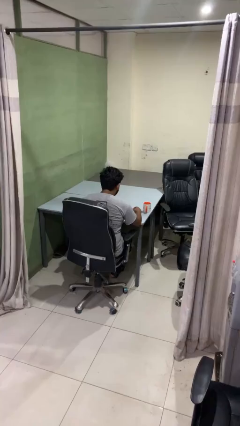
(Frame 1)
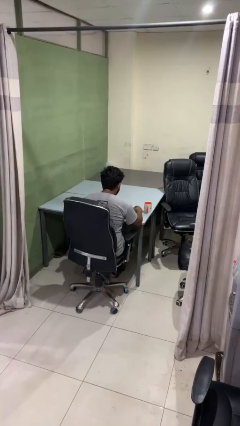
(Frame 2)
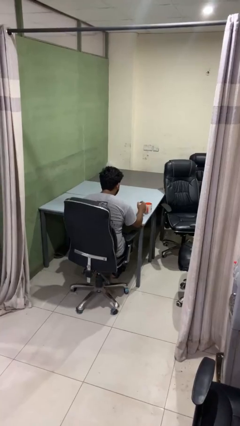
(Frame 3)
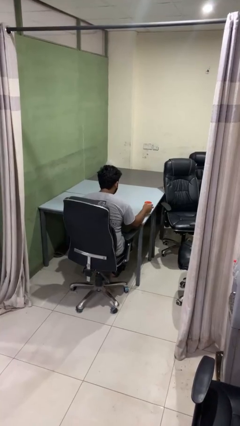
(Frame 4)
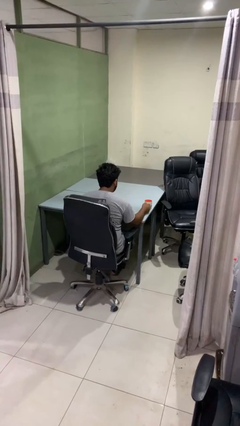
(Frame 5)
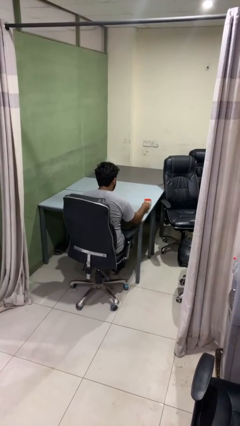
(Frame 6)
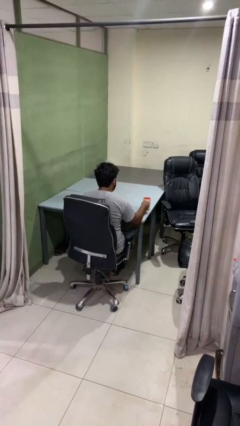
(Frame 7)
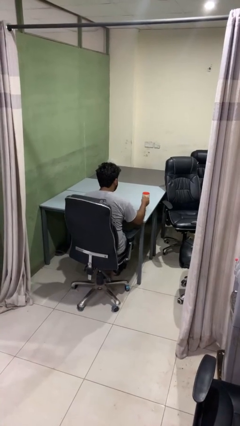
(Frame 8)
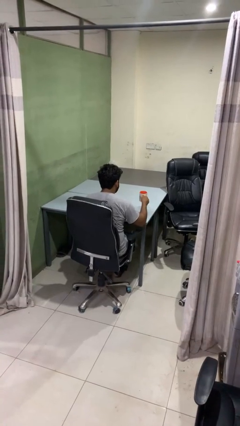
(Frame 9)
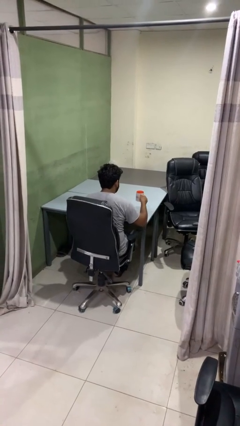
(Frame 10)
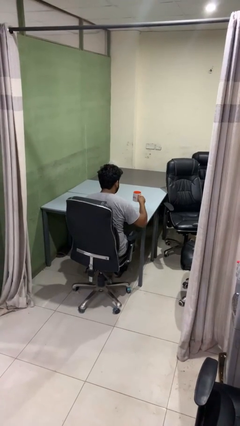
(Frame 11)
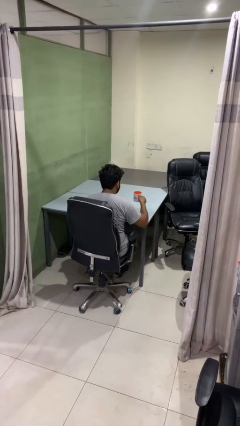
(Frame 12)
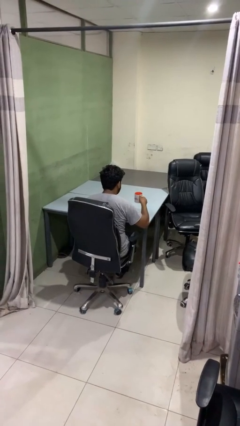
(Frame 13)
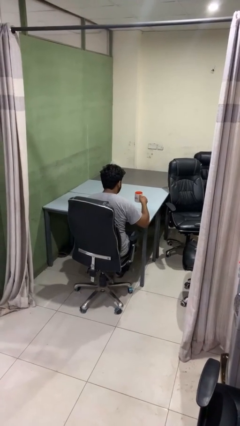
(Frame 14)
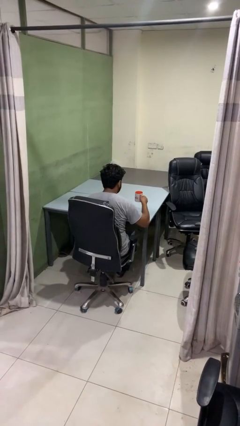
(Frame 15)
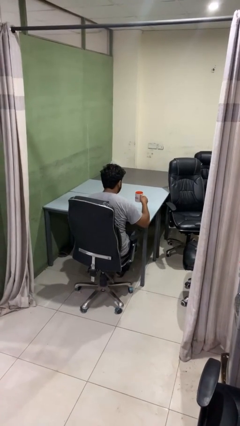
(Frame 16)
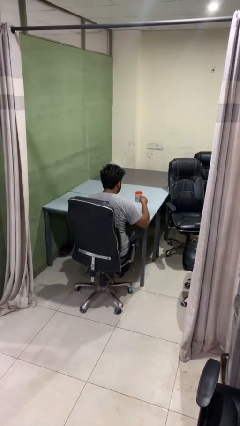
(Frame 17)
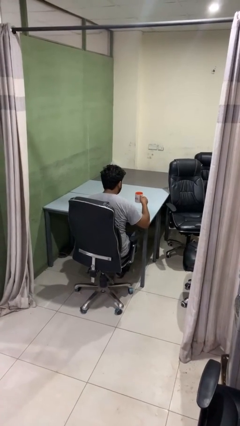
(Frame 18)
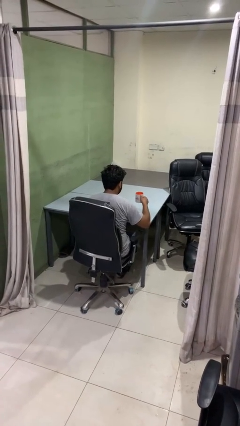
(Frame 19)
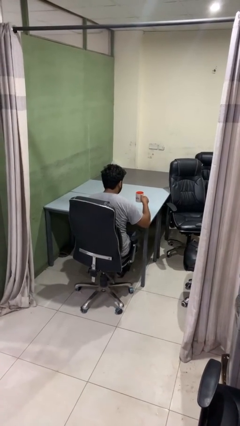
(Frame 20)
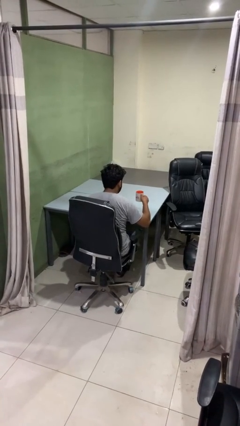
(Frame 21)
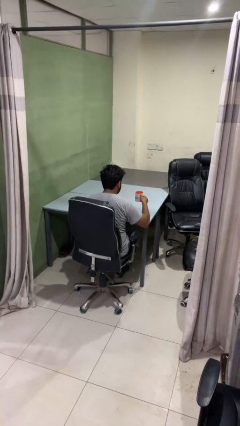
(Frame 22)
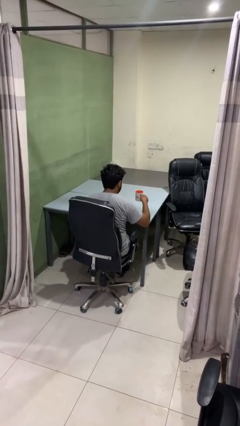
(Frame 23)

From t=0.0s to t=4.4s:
person picks up object from table

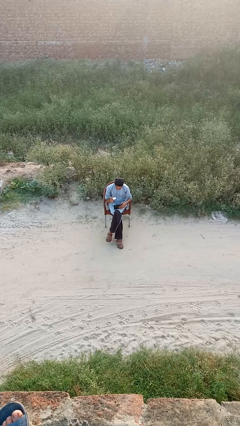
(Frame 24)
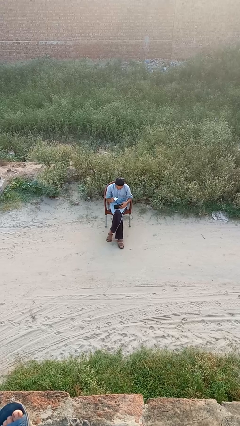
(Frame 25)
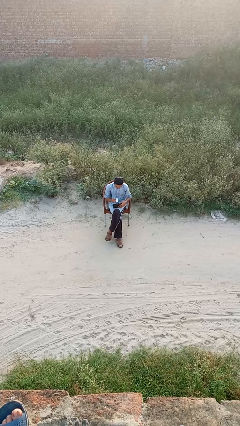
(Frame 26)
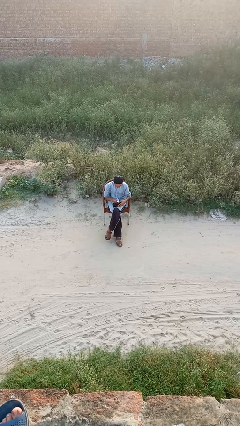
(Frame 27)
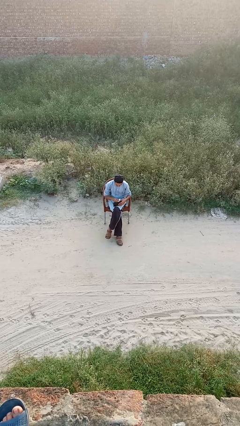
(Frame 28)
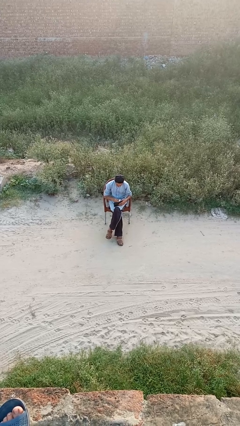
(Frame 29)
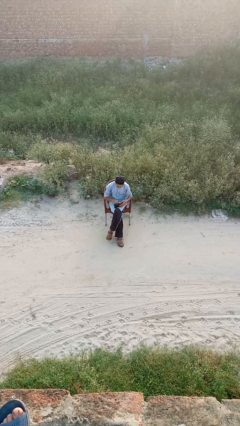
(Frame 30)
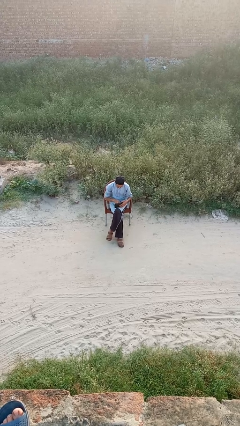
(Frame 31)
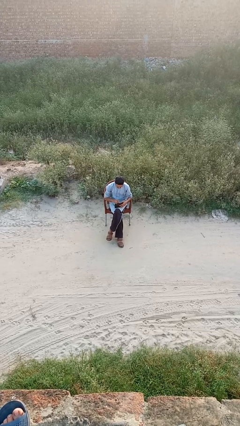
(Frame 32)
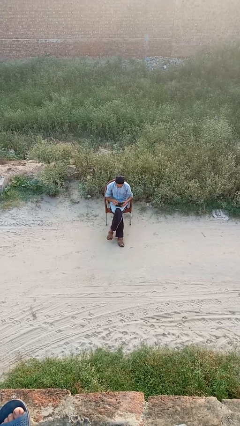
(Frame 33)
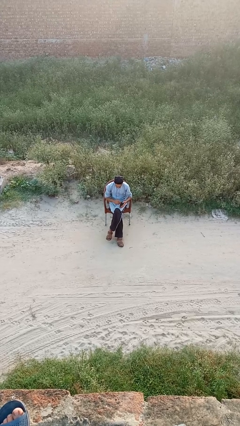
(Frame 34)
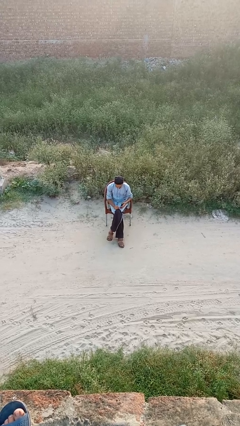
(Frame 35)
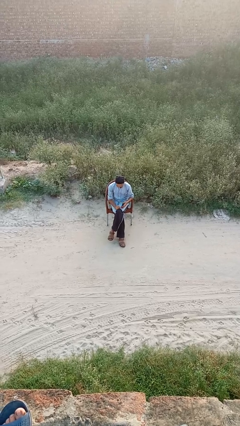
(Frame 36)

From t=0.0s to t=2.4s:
person puts object into purse

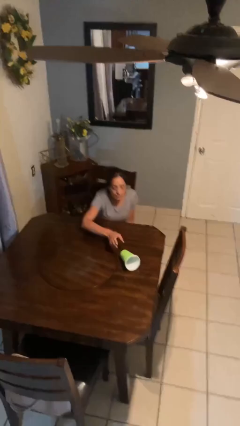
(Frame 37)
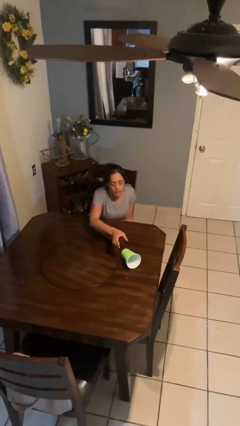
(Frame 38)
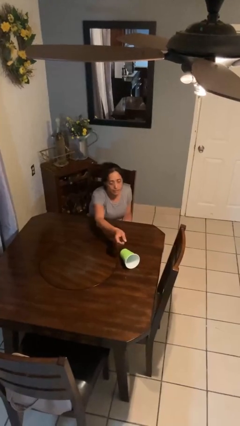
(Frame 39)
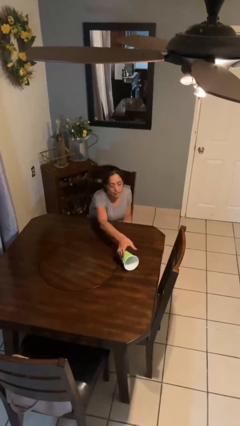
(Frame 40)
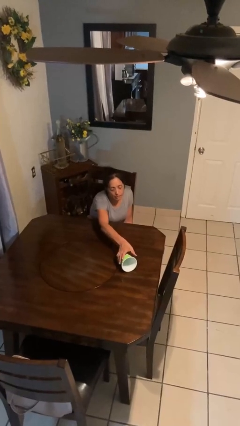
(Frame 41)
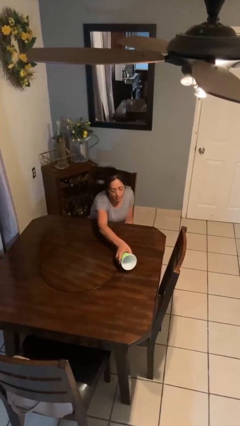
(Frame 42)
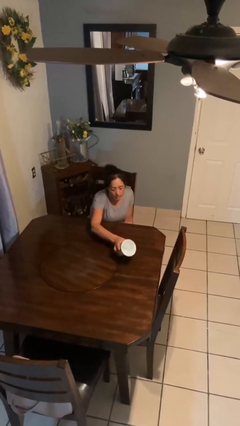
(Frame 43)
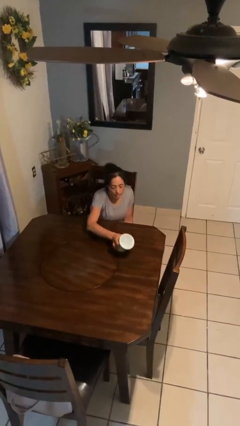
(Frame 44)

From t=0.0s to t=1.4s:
person sets upright glass

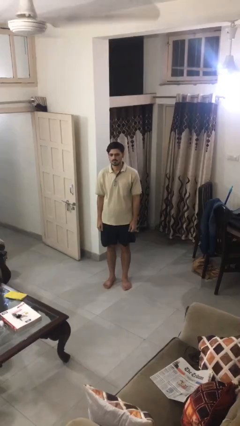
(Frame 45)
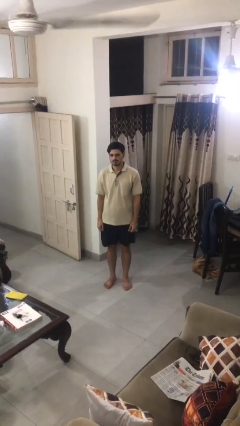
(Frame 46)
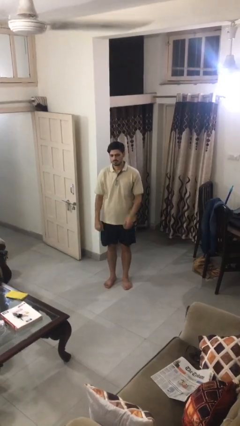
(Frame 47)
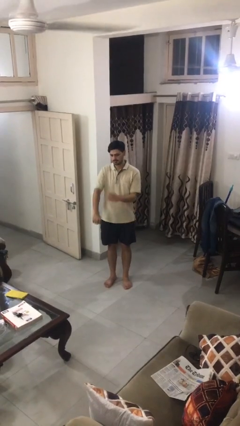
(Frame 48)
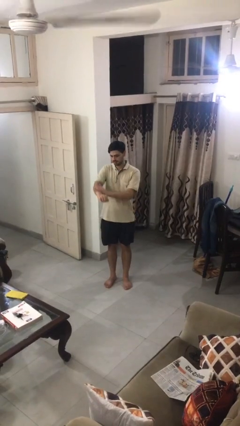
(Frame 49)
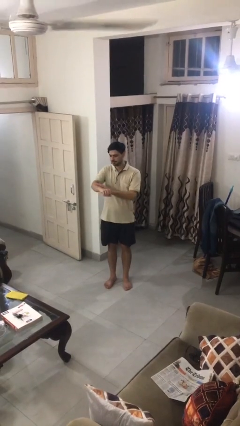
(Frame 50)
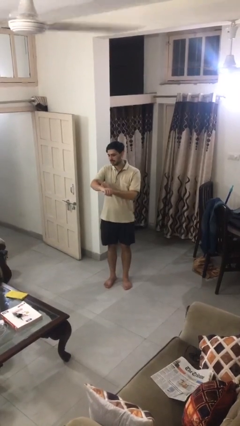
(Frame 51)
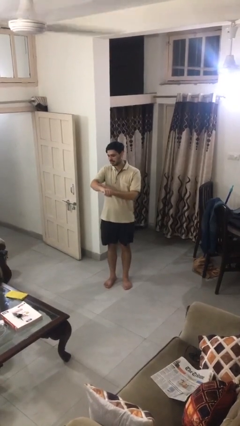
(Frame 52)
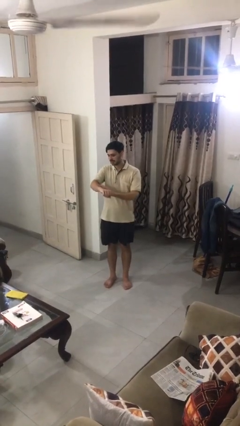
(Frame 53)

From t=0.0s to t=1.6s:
person swats bug

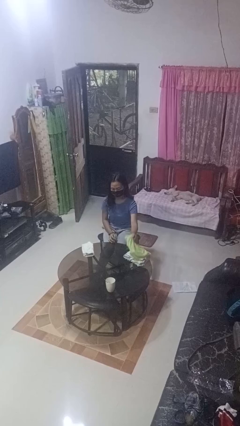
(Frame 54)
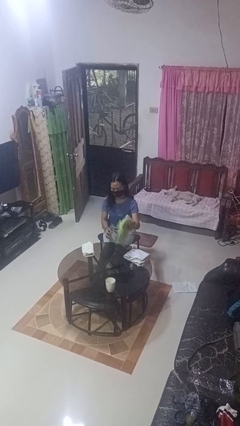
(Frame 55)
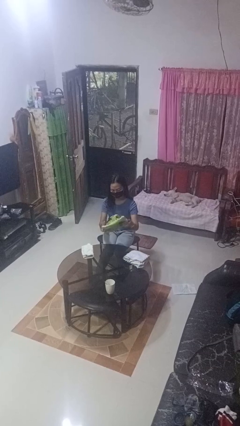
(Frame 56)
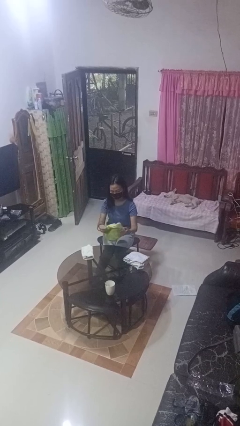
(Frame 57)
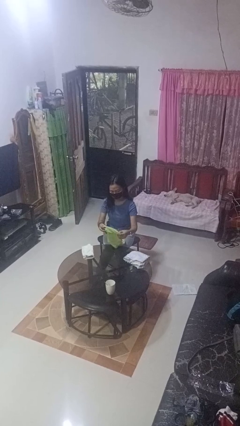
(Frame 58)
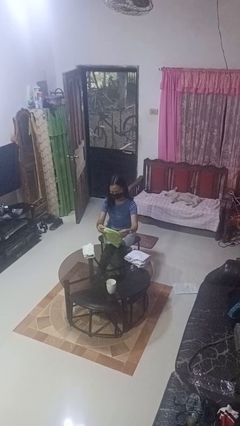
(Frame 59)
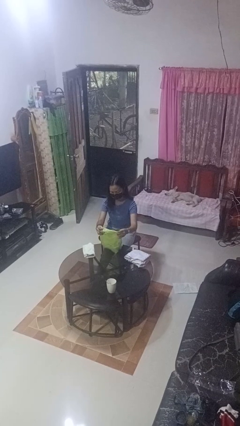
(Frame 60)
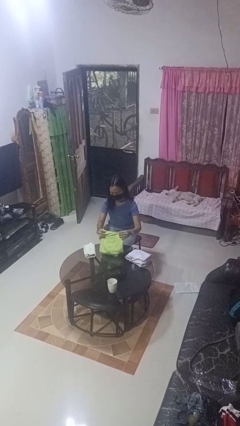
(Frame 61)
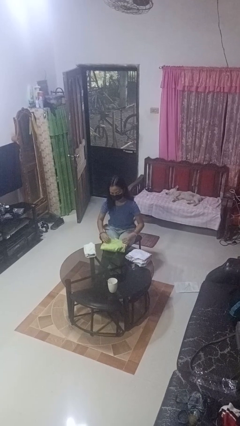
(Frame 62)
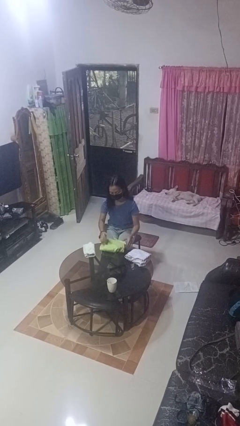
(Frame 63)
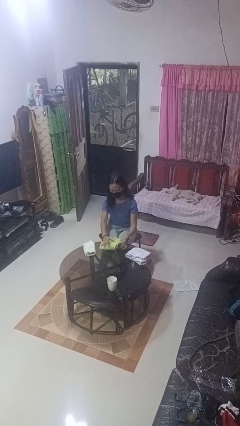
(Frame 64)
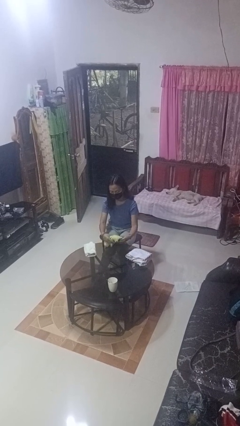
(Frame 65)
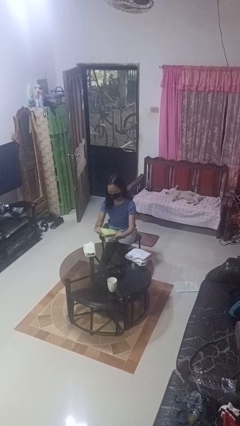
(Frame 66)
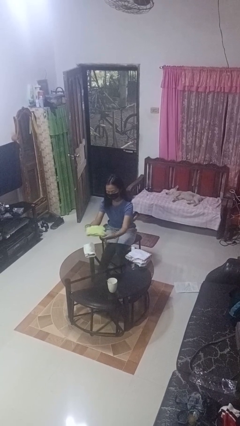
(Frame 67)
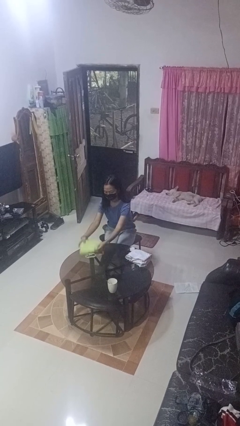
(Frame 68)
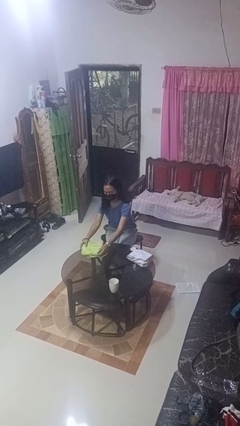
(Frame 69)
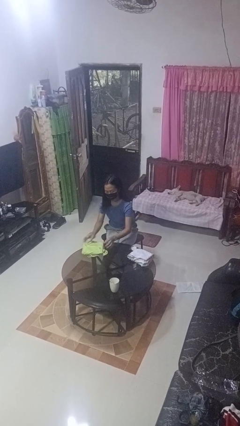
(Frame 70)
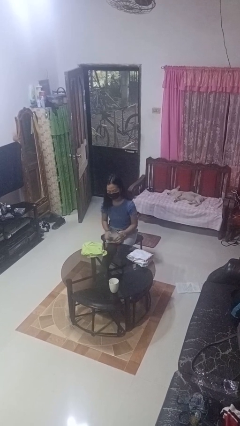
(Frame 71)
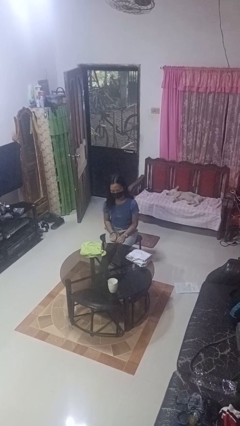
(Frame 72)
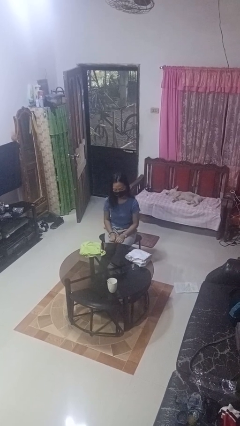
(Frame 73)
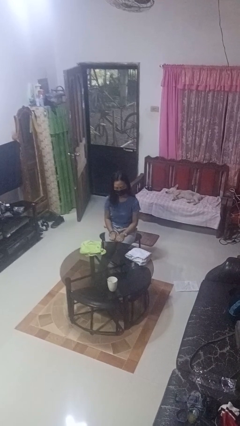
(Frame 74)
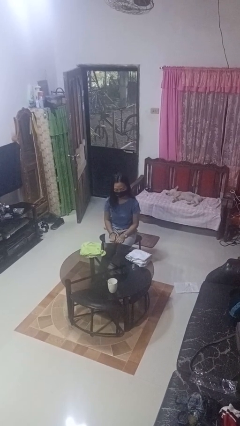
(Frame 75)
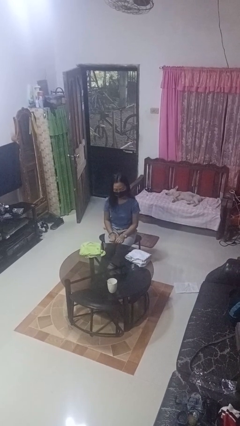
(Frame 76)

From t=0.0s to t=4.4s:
person folds towel

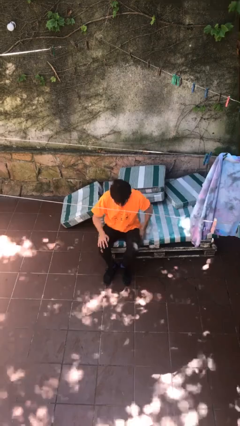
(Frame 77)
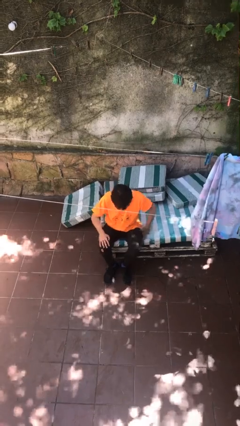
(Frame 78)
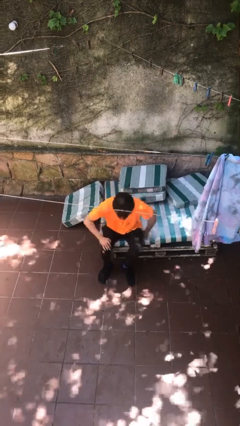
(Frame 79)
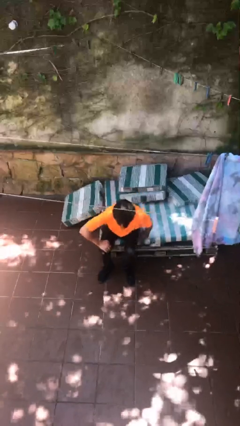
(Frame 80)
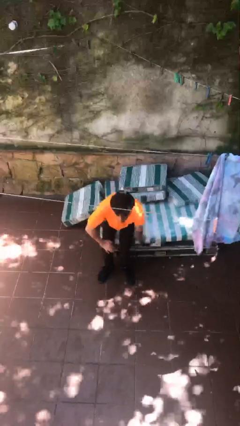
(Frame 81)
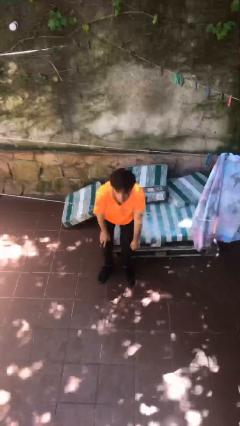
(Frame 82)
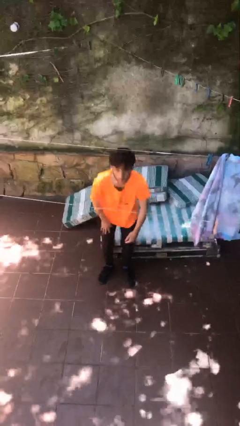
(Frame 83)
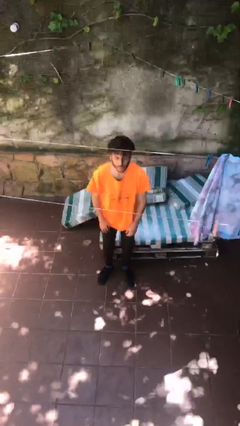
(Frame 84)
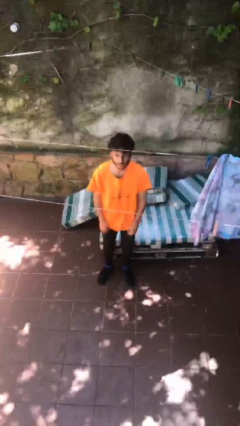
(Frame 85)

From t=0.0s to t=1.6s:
person stands up

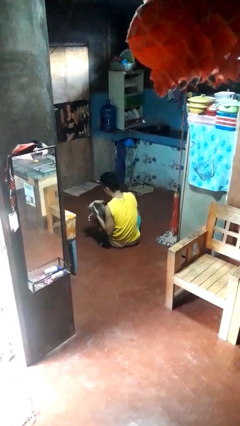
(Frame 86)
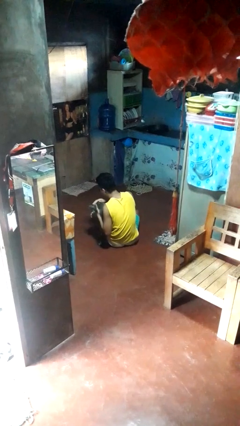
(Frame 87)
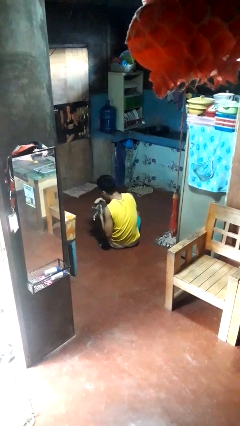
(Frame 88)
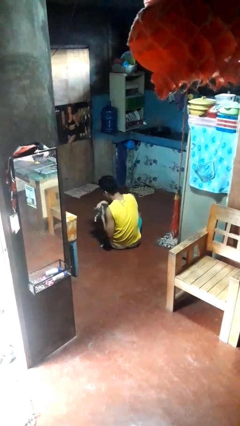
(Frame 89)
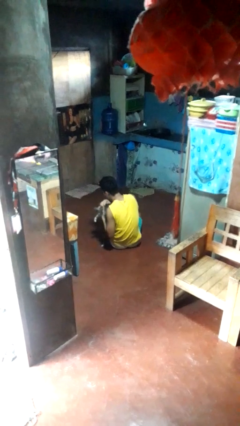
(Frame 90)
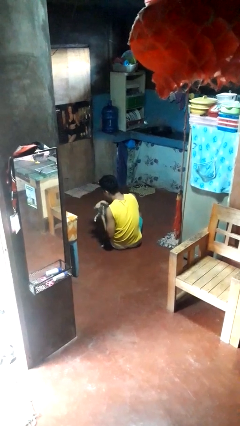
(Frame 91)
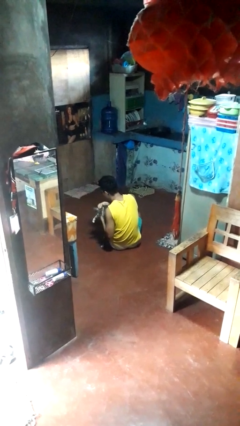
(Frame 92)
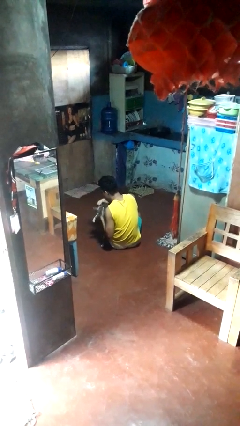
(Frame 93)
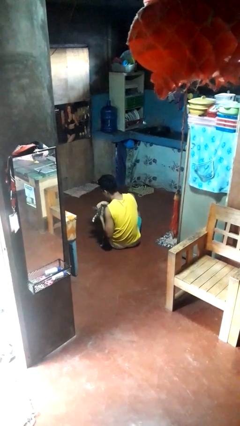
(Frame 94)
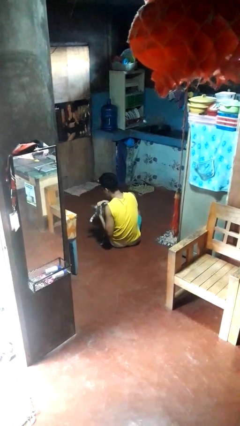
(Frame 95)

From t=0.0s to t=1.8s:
person hugs cat
